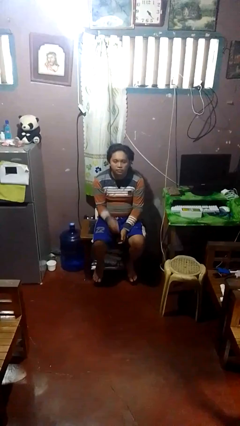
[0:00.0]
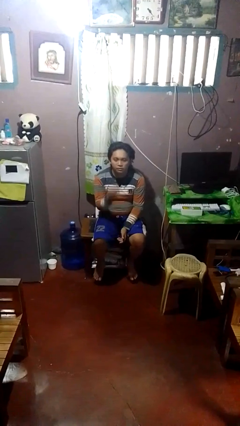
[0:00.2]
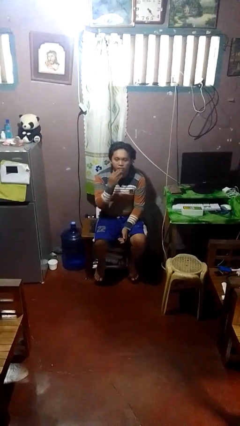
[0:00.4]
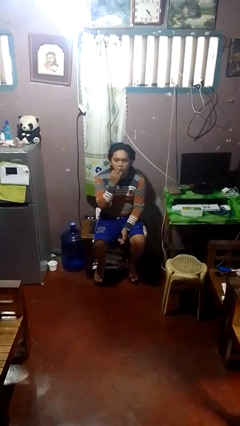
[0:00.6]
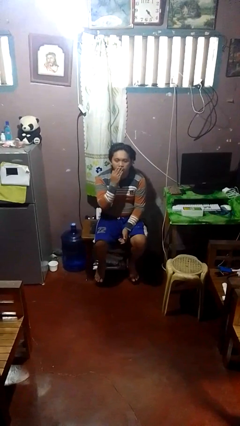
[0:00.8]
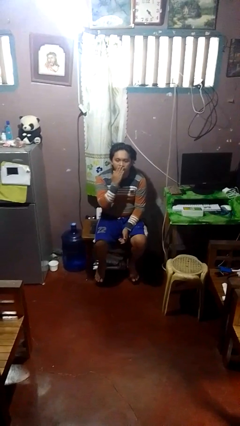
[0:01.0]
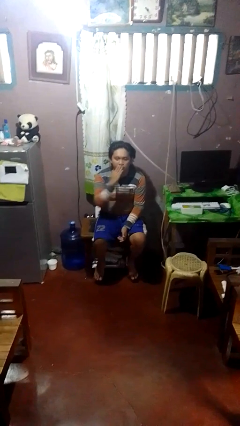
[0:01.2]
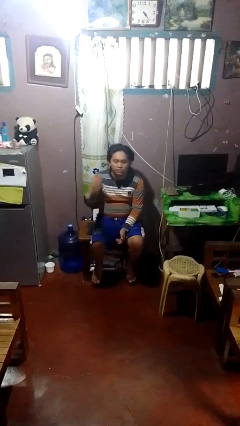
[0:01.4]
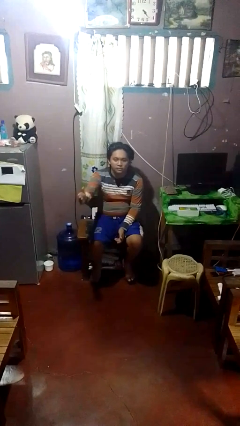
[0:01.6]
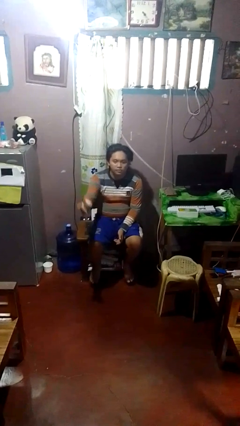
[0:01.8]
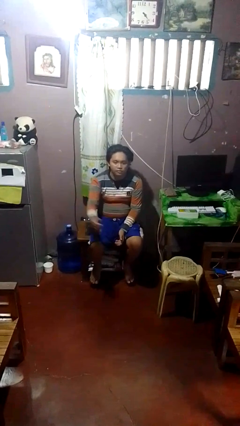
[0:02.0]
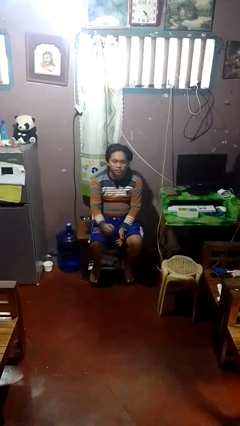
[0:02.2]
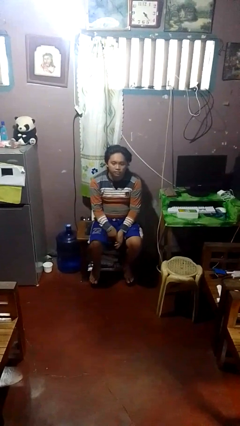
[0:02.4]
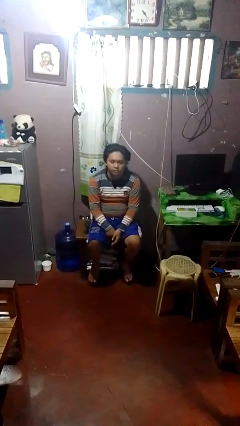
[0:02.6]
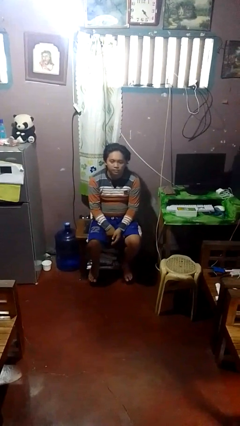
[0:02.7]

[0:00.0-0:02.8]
person gestures blow kiss

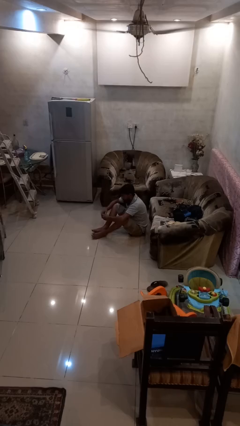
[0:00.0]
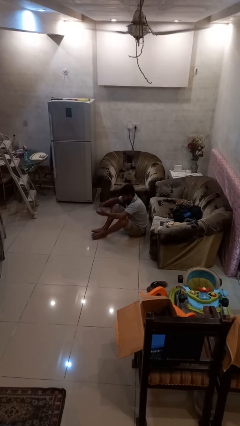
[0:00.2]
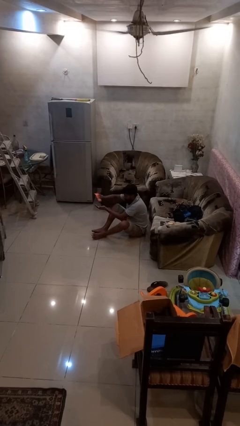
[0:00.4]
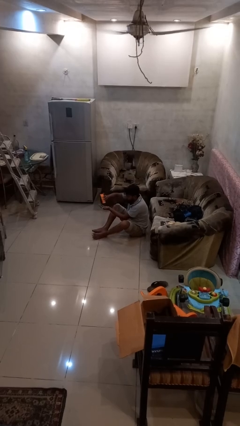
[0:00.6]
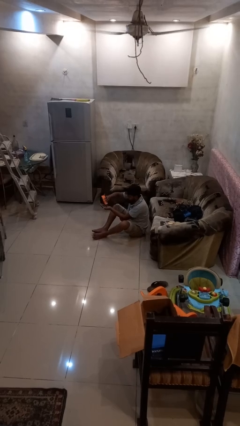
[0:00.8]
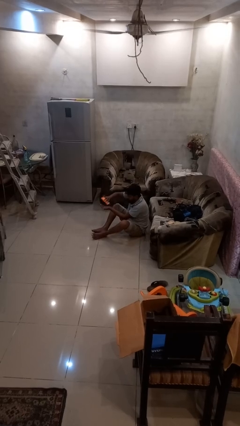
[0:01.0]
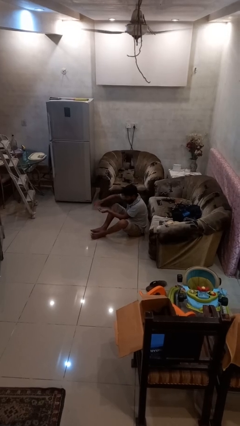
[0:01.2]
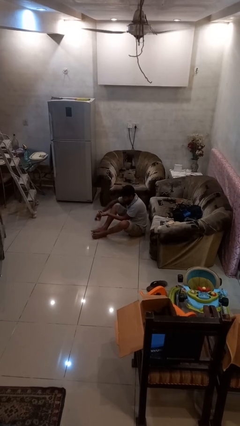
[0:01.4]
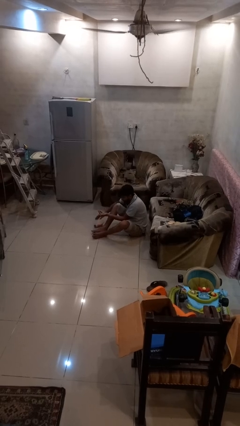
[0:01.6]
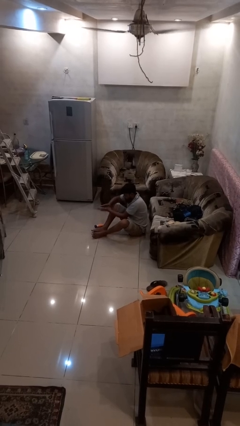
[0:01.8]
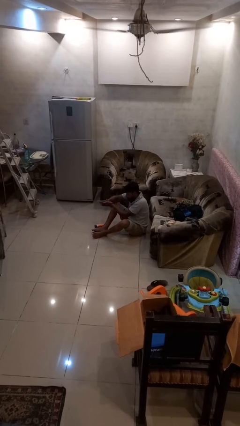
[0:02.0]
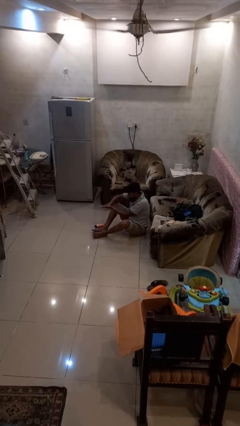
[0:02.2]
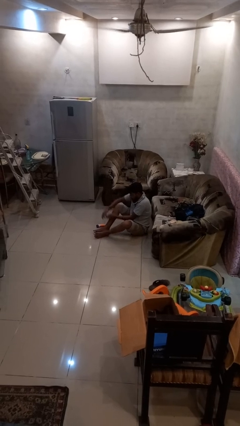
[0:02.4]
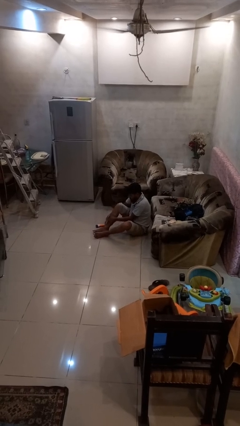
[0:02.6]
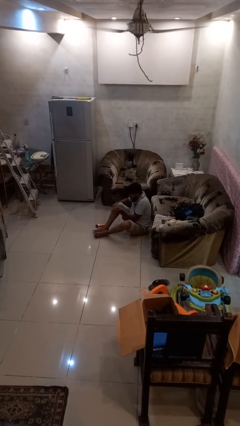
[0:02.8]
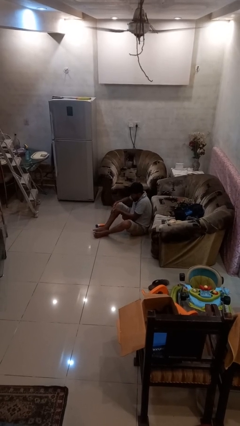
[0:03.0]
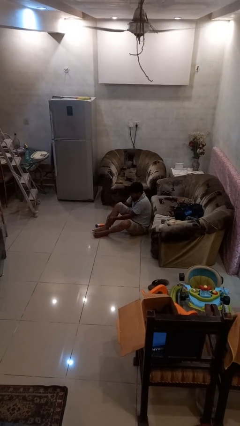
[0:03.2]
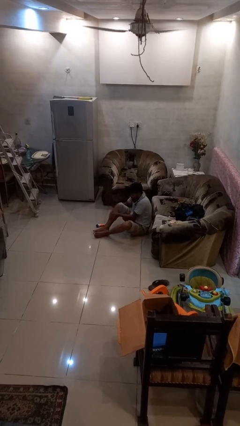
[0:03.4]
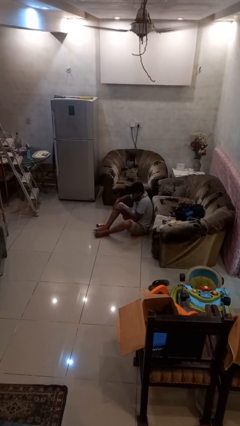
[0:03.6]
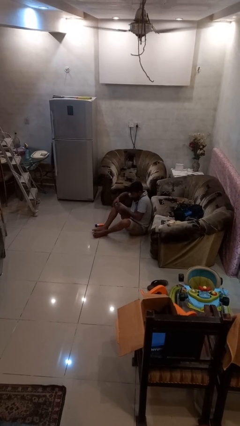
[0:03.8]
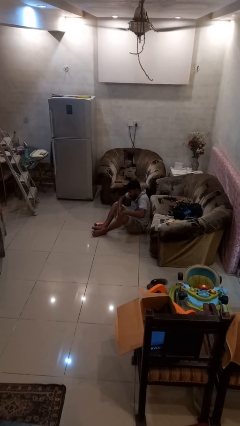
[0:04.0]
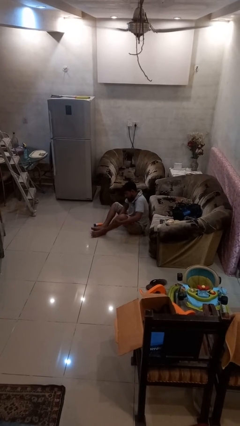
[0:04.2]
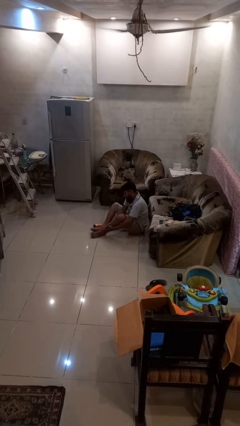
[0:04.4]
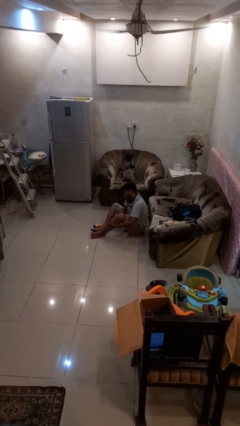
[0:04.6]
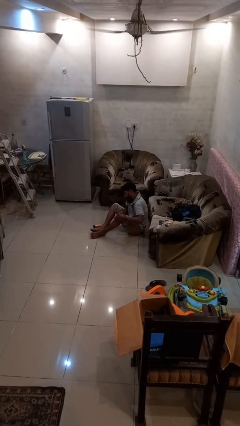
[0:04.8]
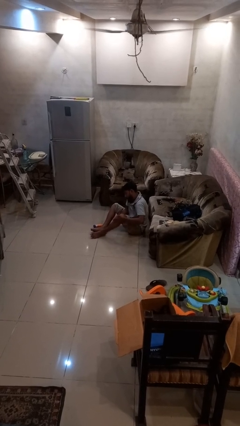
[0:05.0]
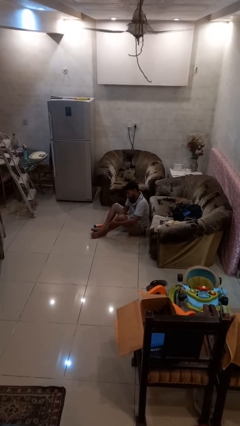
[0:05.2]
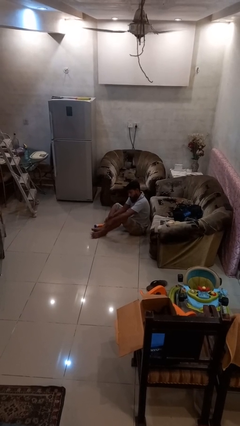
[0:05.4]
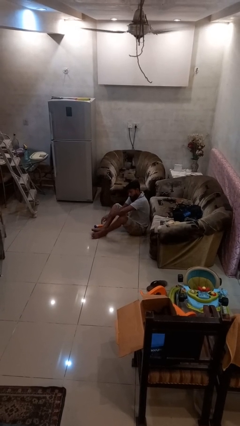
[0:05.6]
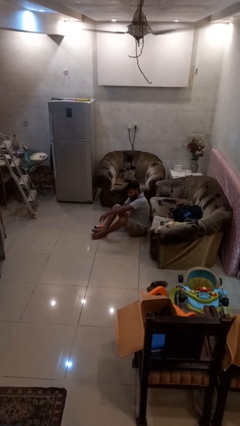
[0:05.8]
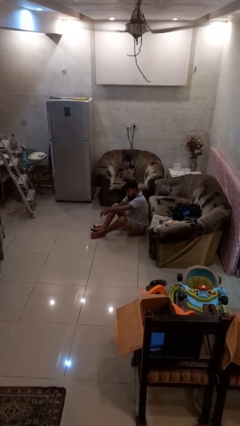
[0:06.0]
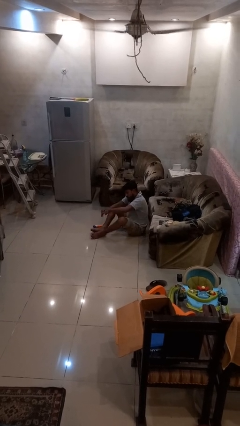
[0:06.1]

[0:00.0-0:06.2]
person applies sunscreen

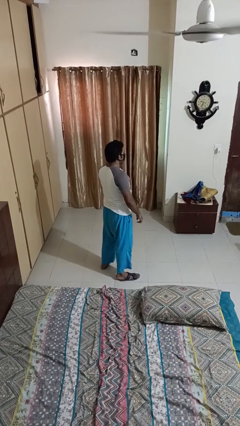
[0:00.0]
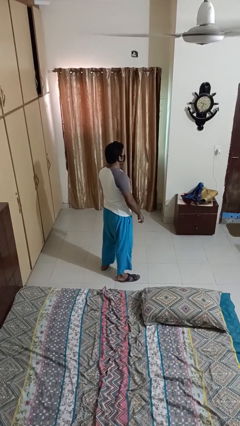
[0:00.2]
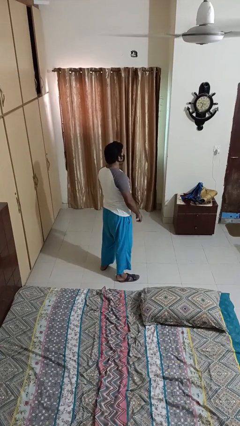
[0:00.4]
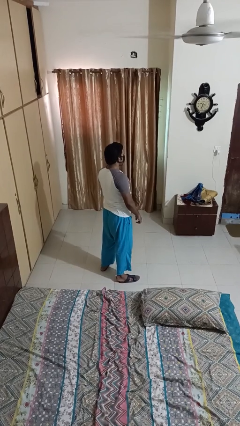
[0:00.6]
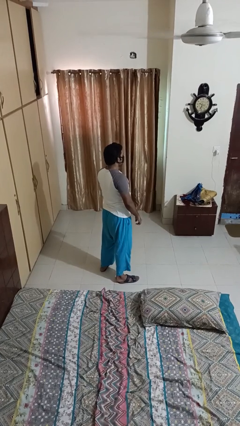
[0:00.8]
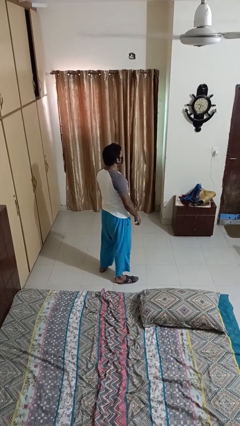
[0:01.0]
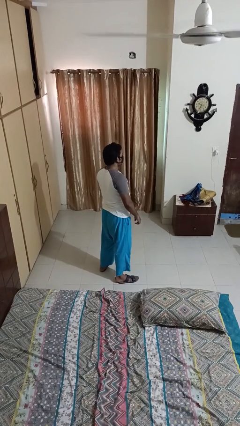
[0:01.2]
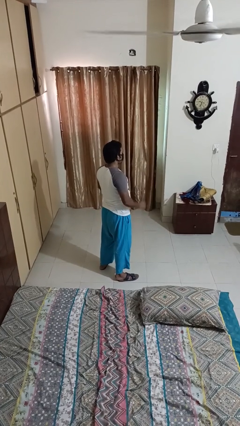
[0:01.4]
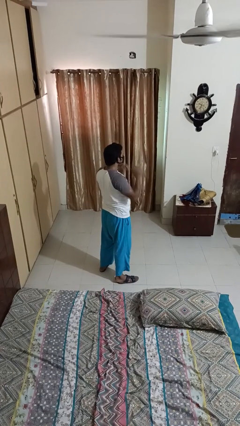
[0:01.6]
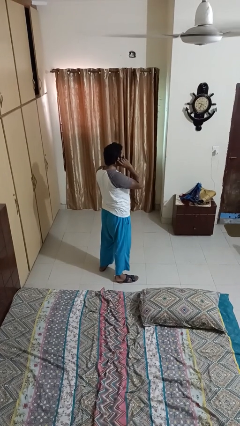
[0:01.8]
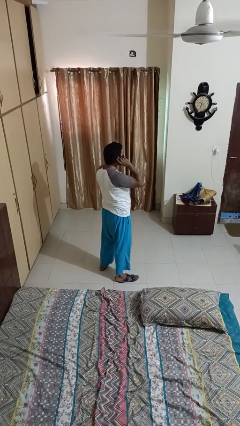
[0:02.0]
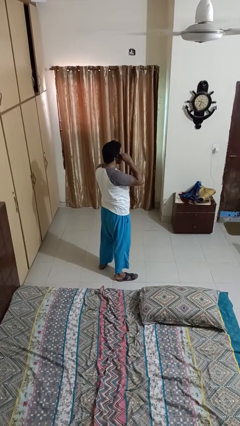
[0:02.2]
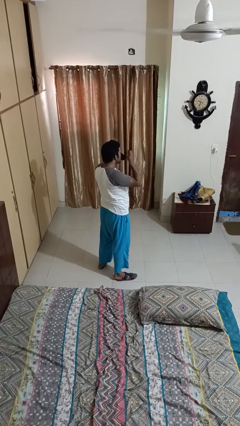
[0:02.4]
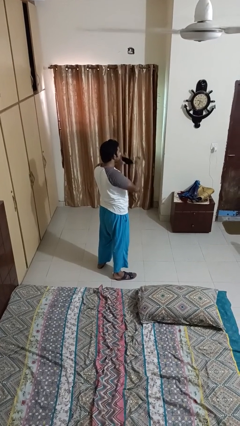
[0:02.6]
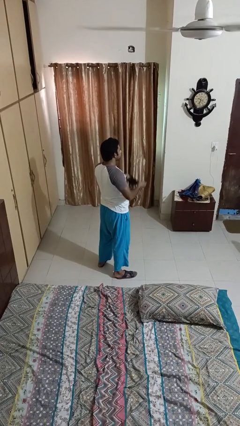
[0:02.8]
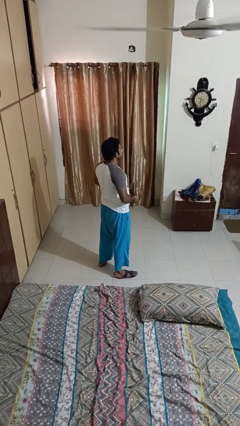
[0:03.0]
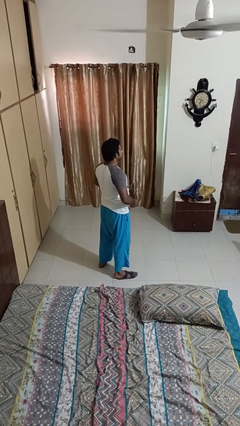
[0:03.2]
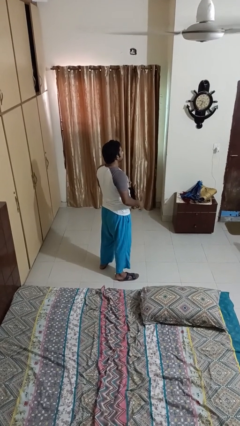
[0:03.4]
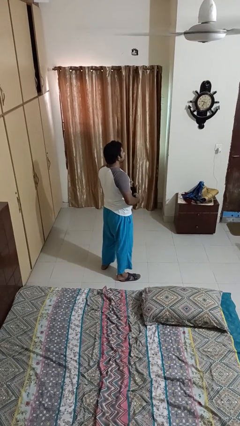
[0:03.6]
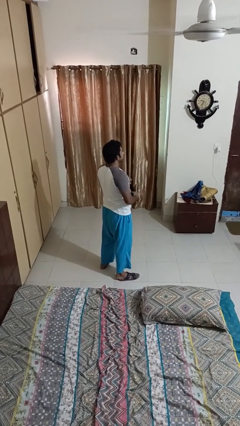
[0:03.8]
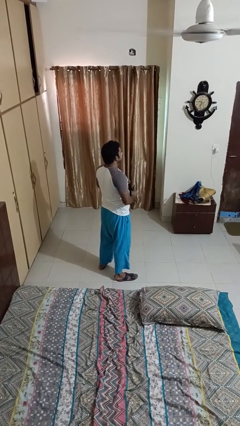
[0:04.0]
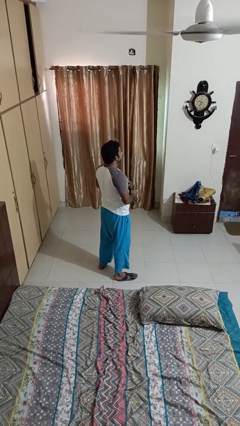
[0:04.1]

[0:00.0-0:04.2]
person takes off facemask

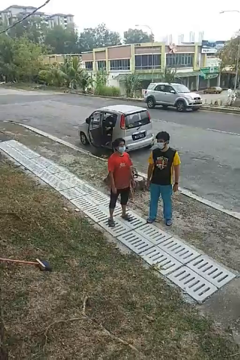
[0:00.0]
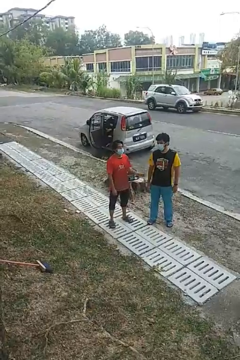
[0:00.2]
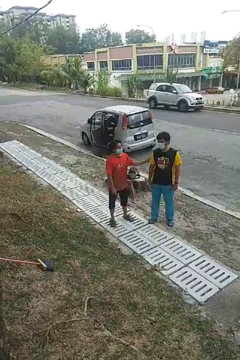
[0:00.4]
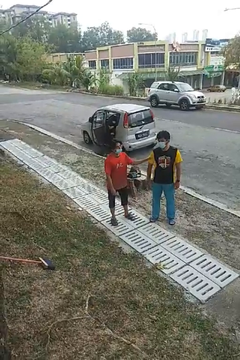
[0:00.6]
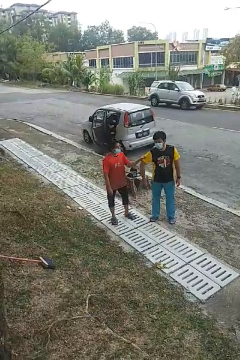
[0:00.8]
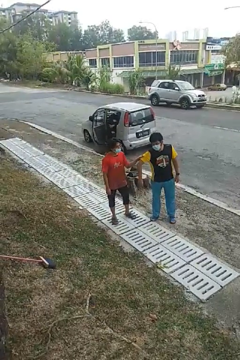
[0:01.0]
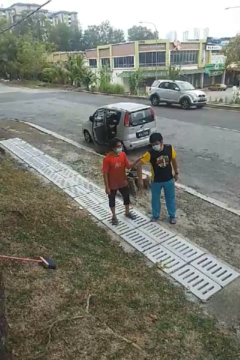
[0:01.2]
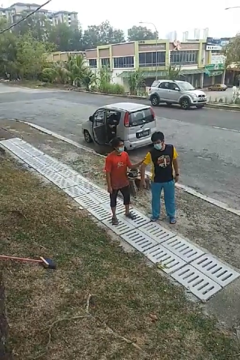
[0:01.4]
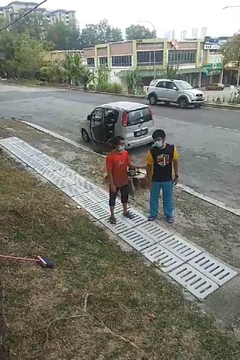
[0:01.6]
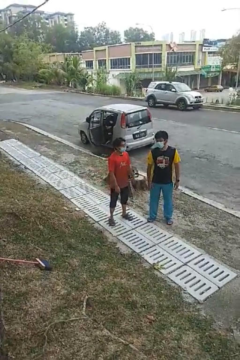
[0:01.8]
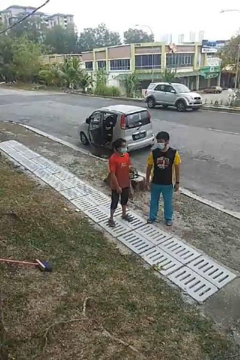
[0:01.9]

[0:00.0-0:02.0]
person grabs person by bicep

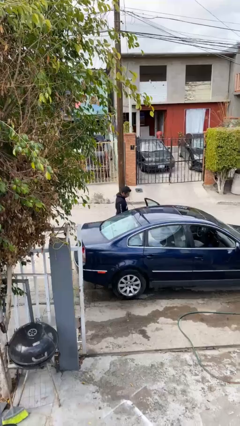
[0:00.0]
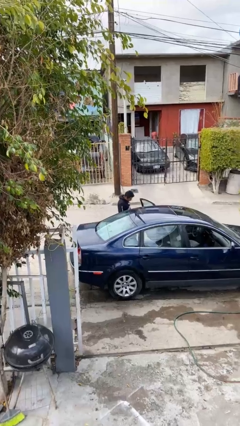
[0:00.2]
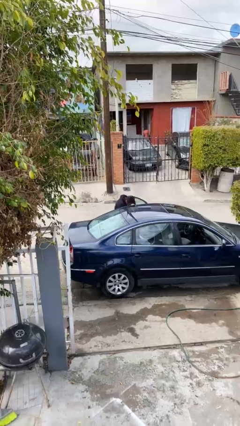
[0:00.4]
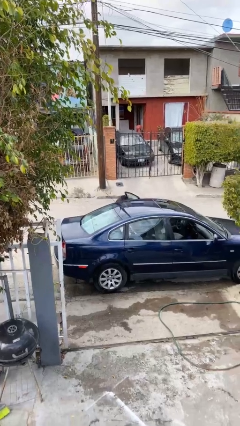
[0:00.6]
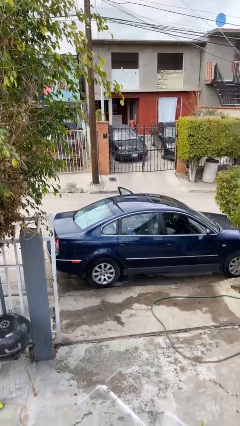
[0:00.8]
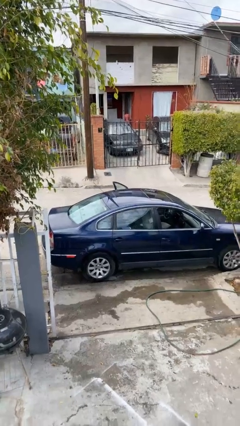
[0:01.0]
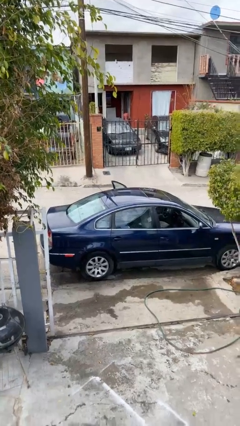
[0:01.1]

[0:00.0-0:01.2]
person enters car

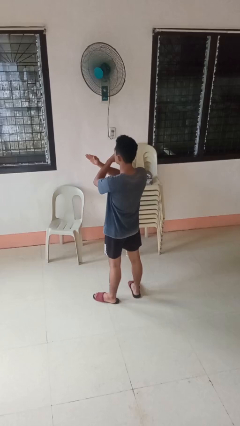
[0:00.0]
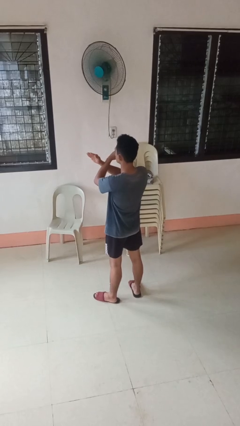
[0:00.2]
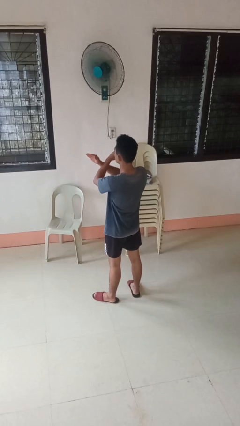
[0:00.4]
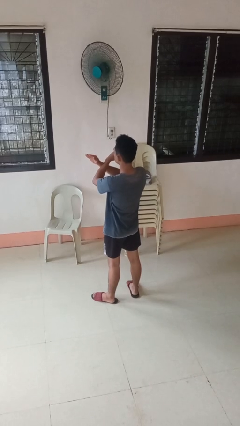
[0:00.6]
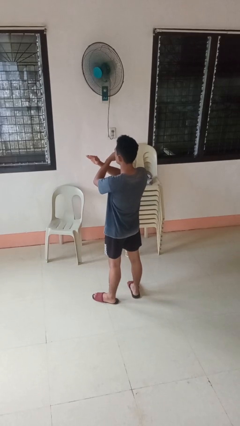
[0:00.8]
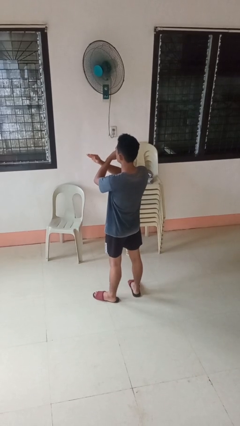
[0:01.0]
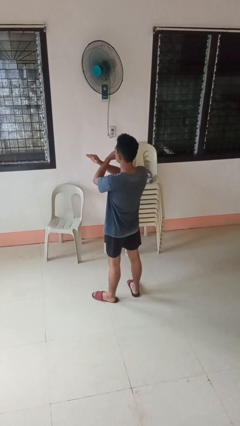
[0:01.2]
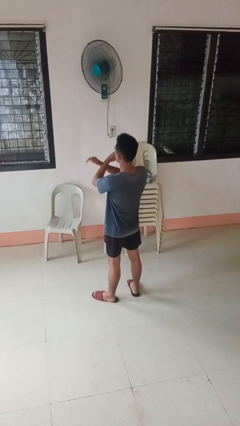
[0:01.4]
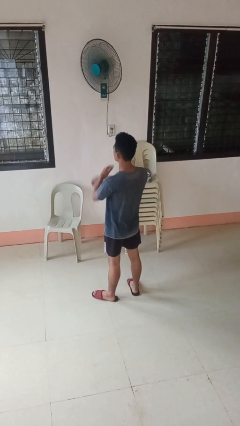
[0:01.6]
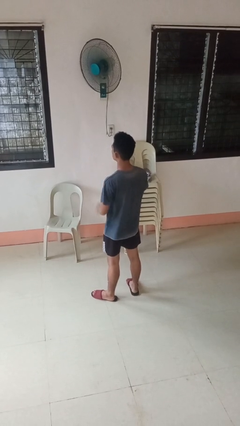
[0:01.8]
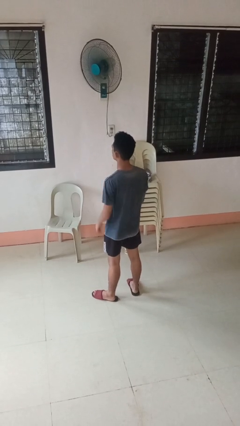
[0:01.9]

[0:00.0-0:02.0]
person gestures arms x
